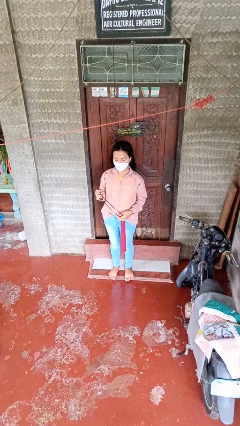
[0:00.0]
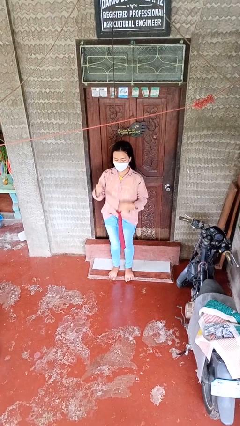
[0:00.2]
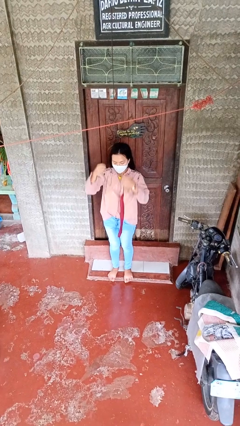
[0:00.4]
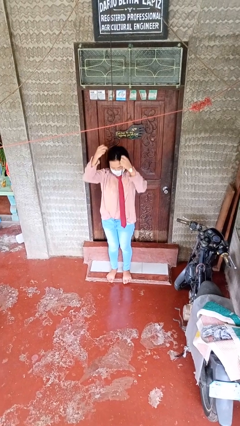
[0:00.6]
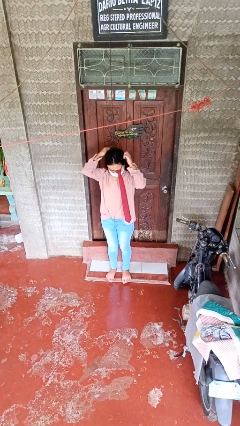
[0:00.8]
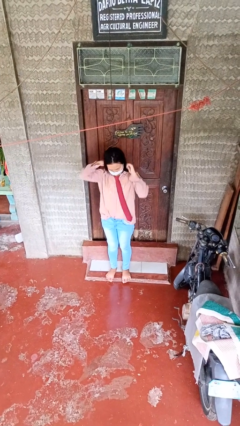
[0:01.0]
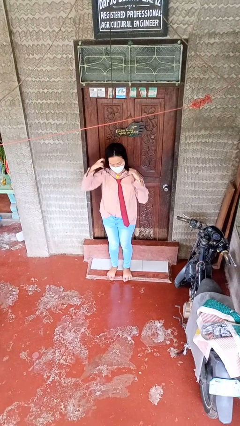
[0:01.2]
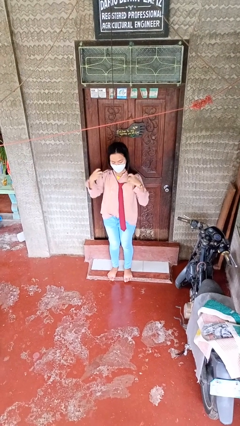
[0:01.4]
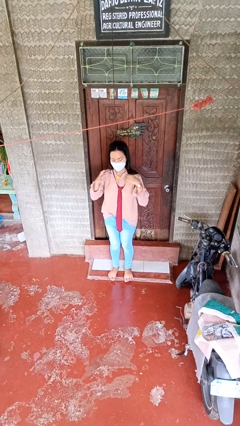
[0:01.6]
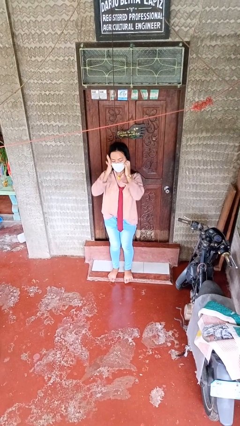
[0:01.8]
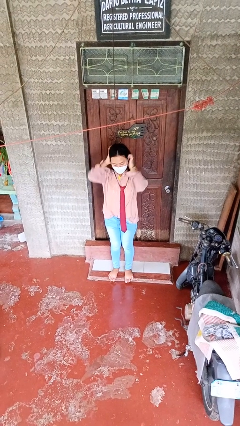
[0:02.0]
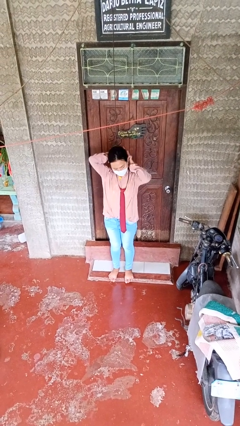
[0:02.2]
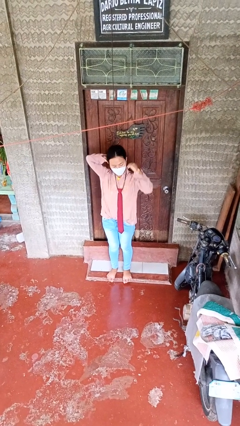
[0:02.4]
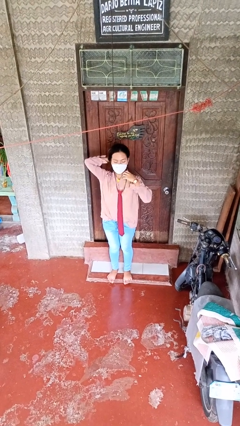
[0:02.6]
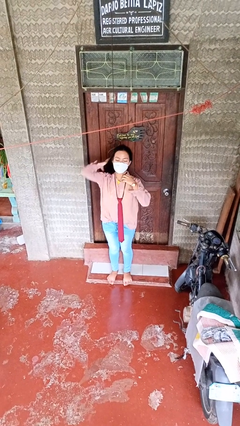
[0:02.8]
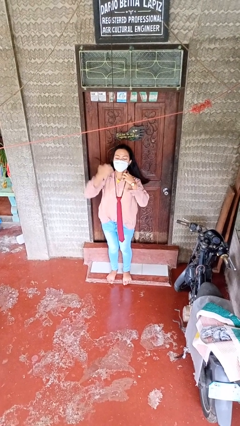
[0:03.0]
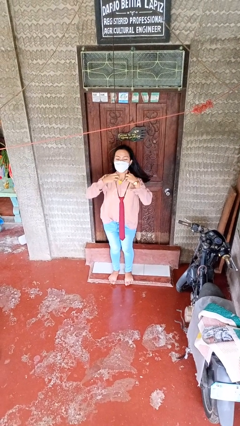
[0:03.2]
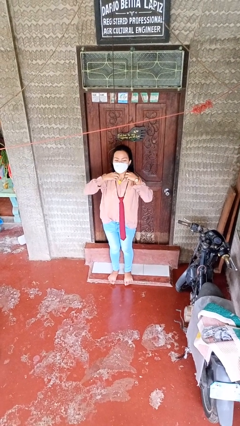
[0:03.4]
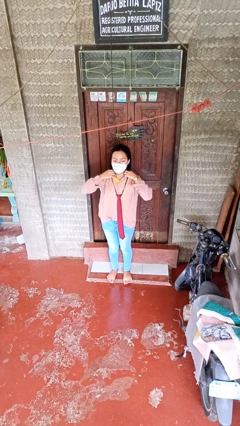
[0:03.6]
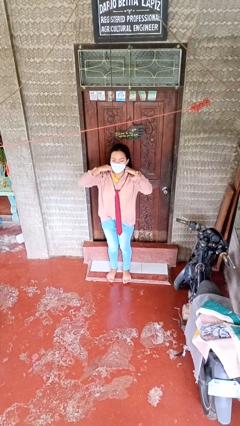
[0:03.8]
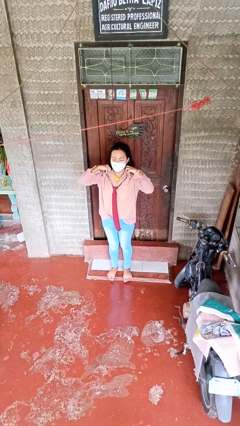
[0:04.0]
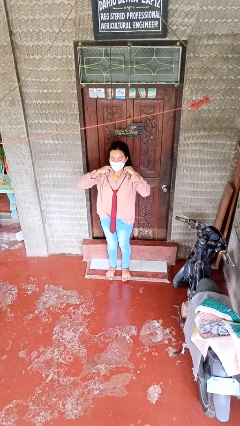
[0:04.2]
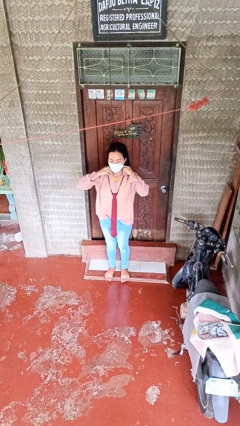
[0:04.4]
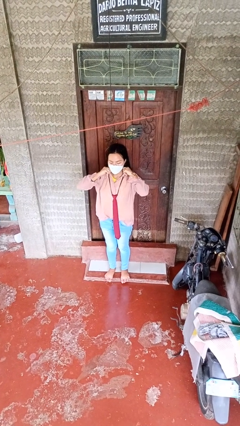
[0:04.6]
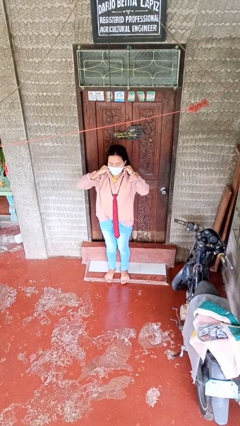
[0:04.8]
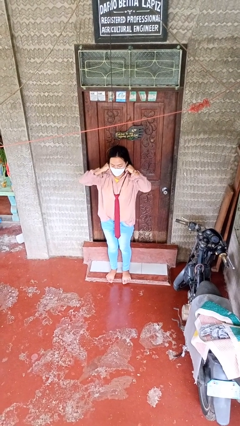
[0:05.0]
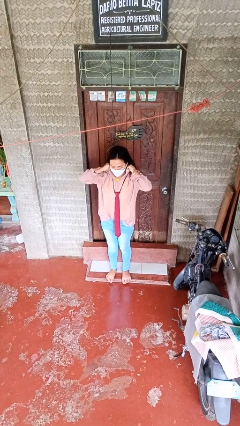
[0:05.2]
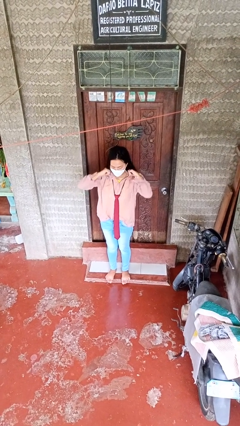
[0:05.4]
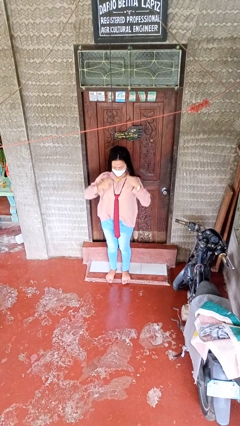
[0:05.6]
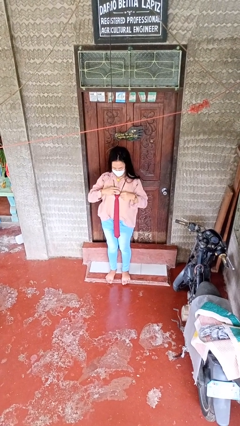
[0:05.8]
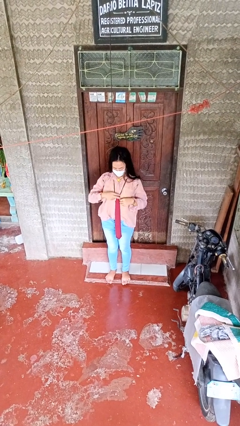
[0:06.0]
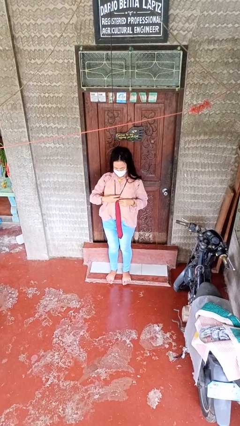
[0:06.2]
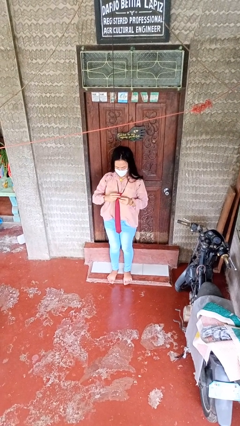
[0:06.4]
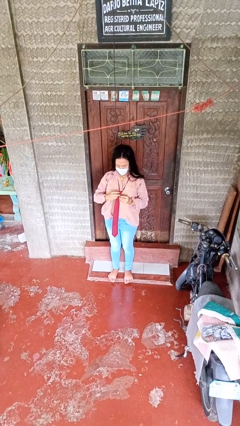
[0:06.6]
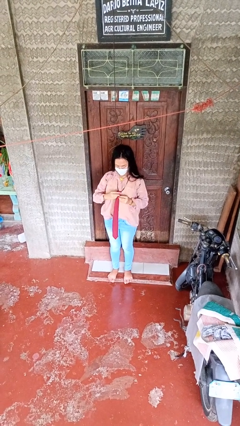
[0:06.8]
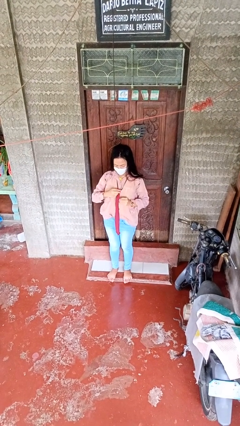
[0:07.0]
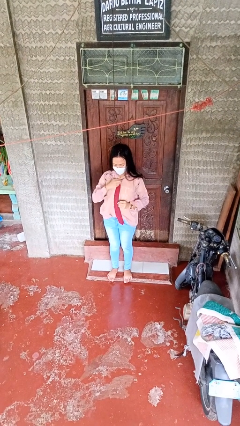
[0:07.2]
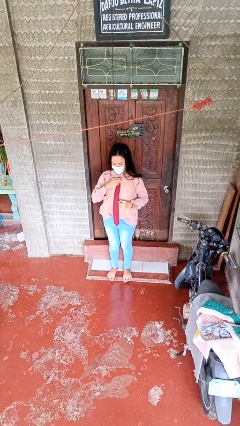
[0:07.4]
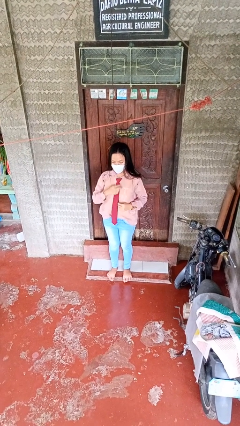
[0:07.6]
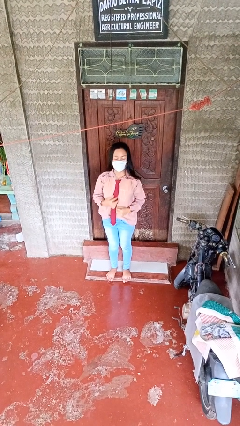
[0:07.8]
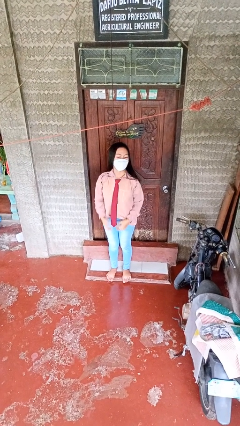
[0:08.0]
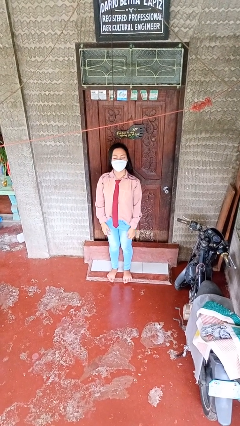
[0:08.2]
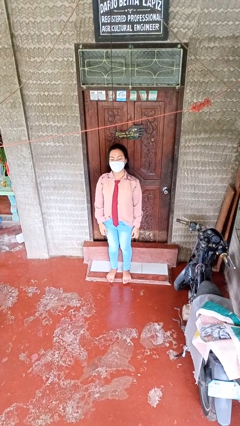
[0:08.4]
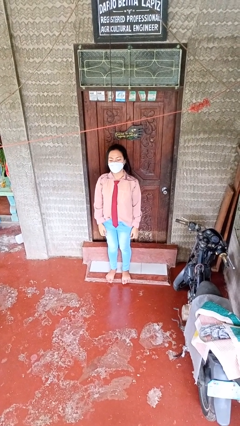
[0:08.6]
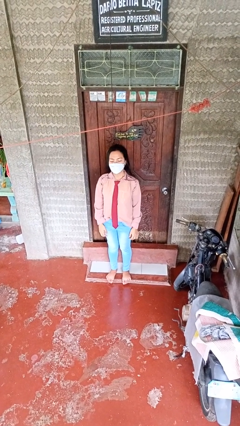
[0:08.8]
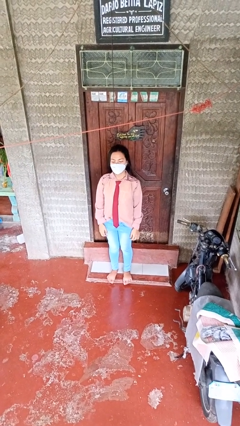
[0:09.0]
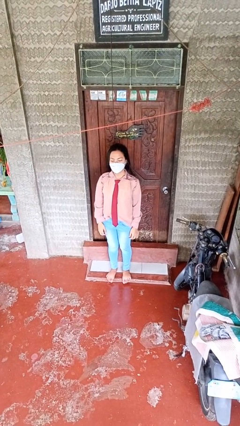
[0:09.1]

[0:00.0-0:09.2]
person puts on necktie

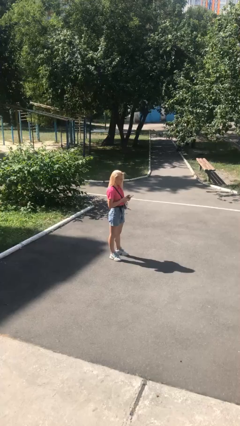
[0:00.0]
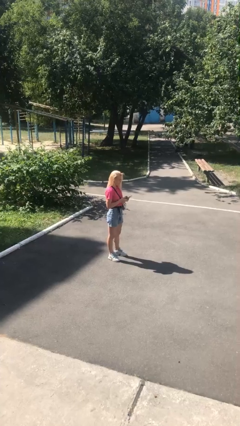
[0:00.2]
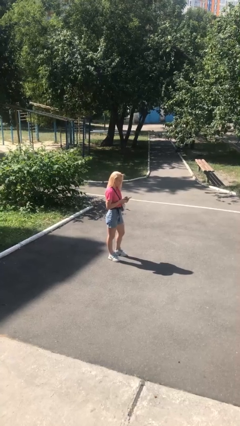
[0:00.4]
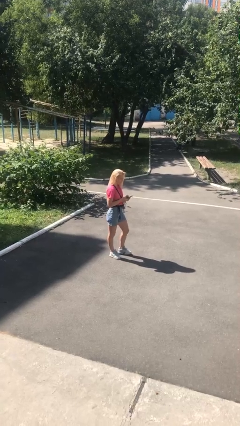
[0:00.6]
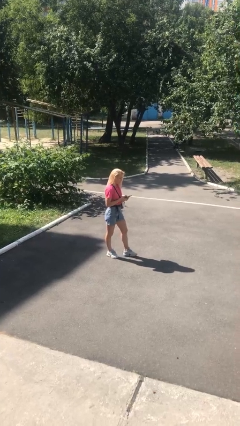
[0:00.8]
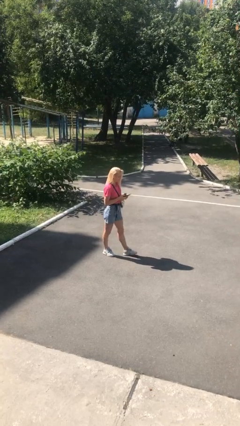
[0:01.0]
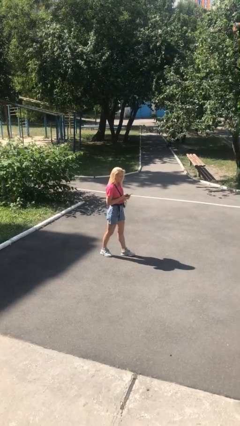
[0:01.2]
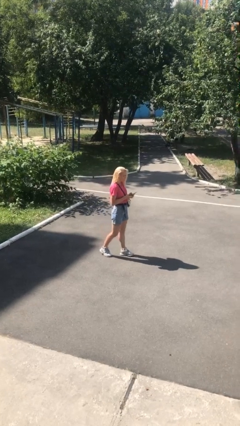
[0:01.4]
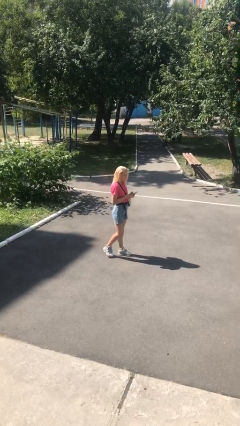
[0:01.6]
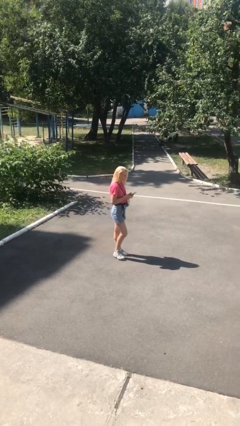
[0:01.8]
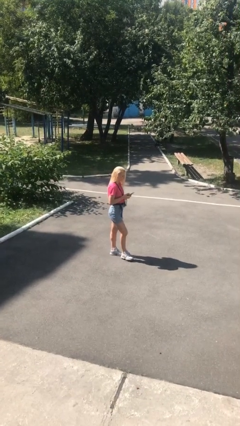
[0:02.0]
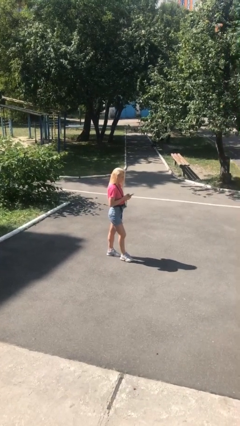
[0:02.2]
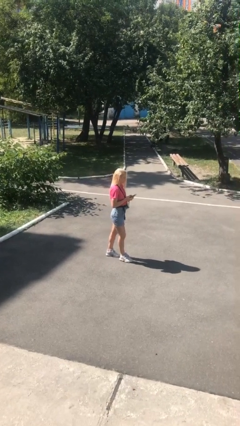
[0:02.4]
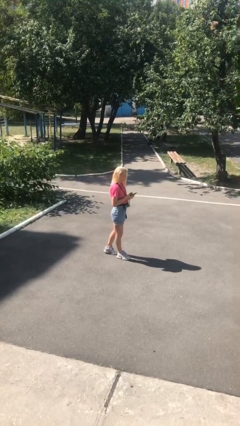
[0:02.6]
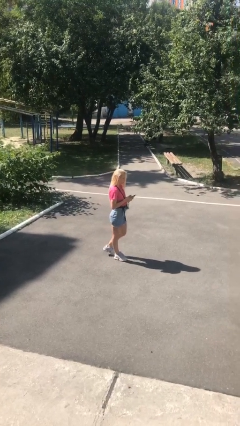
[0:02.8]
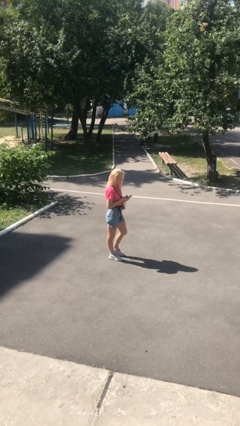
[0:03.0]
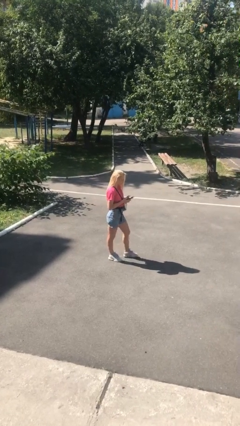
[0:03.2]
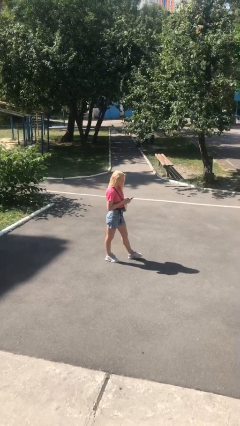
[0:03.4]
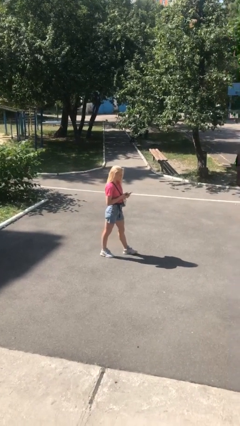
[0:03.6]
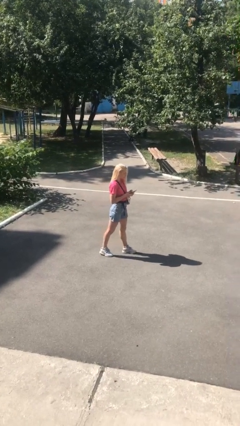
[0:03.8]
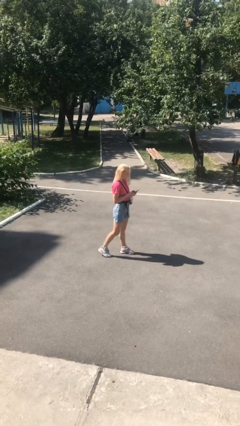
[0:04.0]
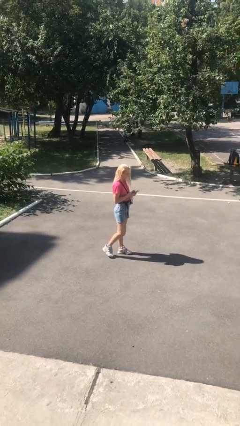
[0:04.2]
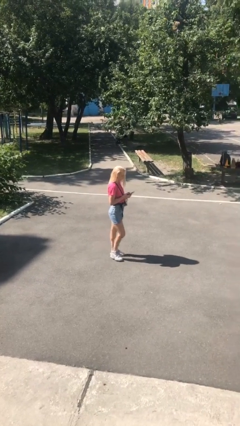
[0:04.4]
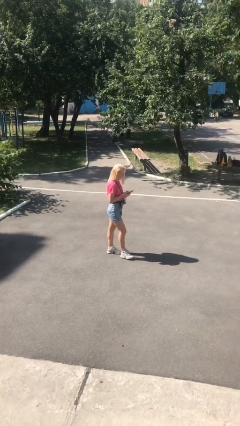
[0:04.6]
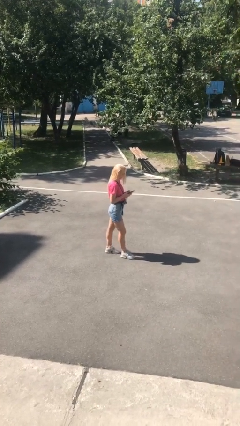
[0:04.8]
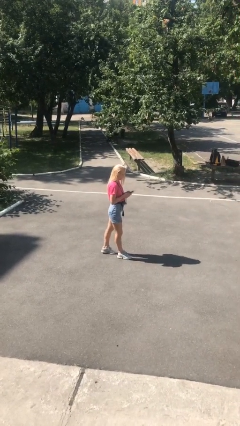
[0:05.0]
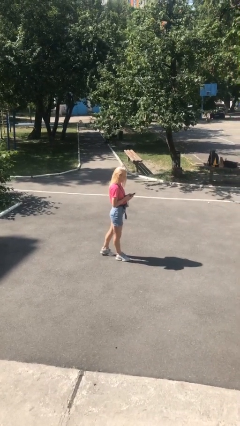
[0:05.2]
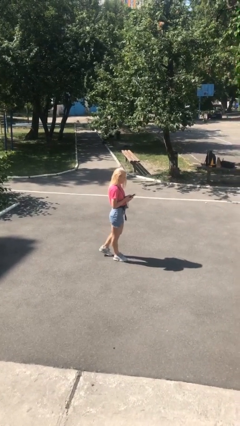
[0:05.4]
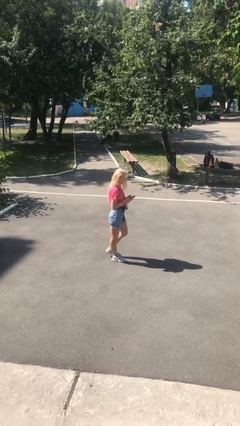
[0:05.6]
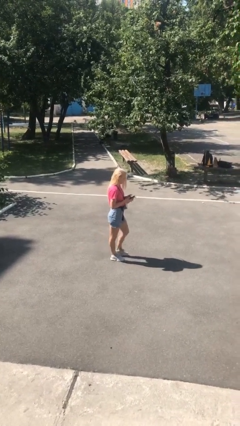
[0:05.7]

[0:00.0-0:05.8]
person texts on phone

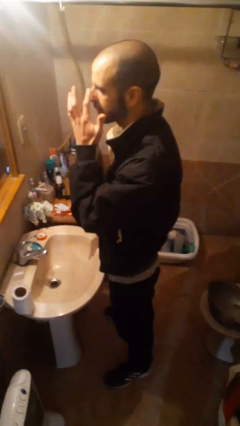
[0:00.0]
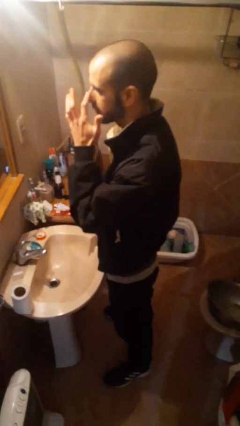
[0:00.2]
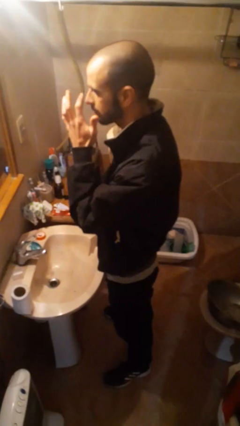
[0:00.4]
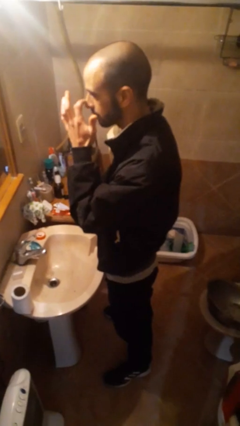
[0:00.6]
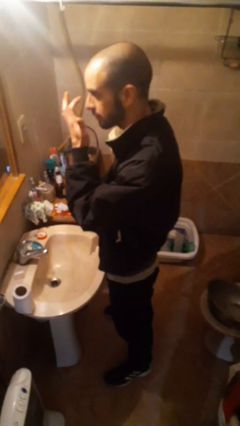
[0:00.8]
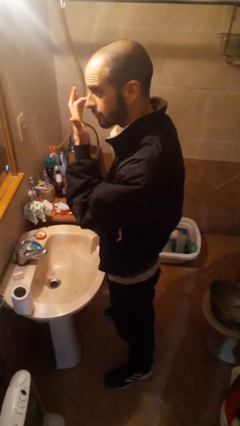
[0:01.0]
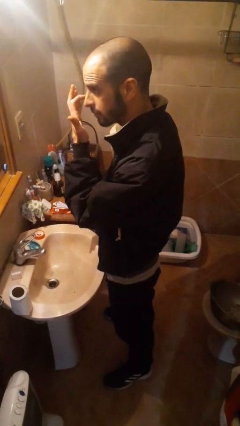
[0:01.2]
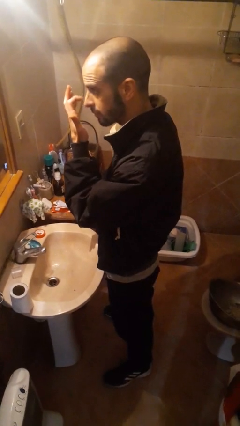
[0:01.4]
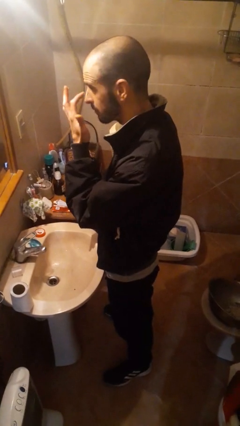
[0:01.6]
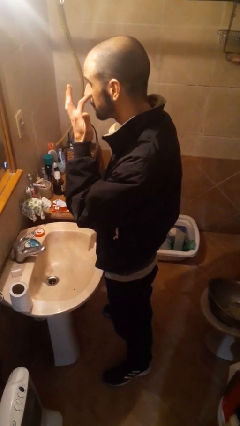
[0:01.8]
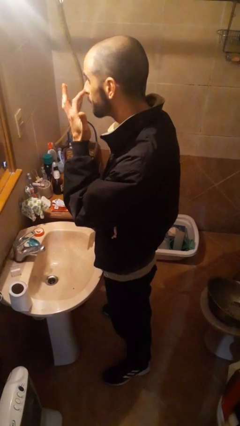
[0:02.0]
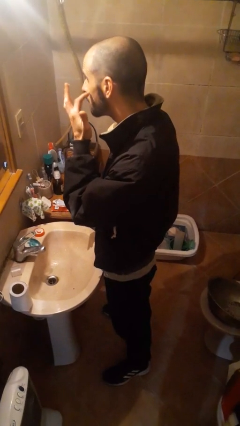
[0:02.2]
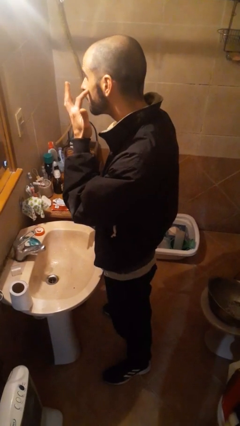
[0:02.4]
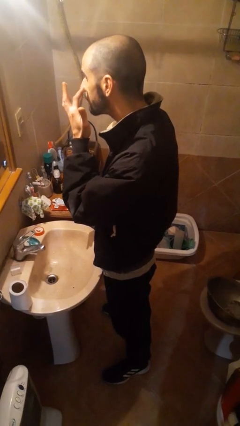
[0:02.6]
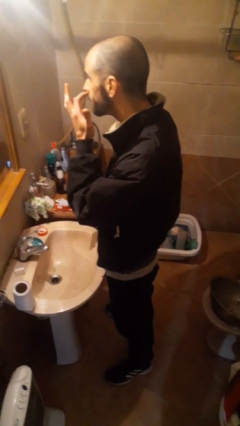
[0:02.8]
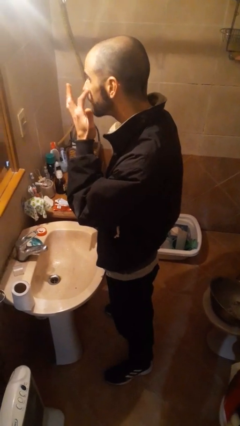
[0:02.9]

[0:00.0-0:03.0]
person applies foundation makeup
